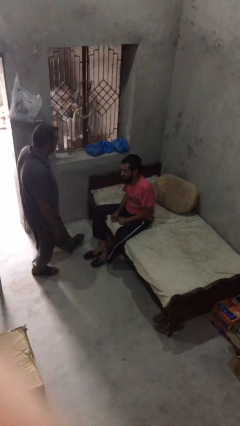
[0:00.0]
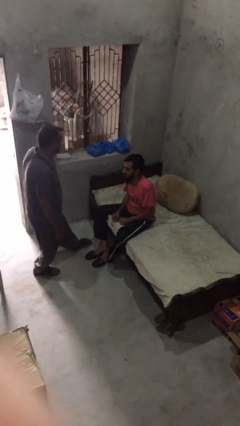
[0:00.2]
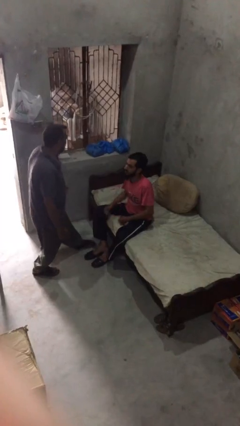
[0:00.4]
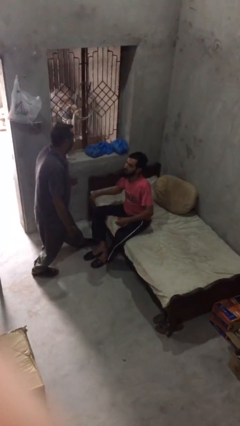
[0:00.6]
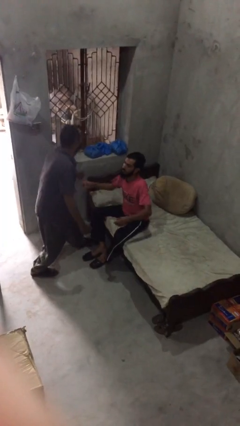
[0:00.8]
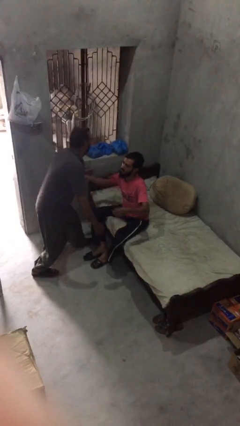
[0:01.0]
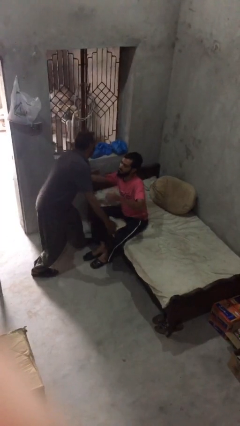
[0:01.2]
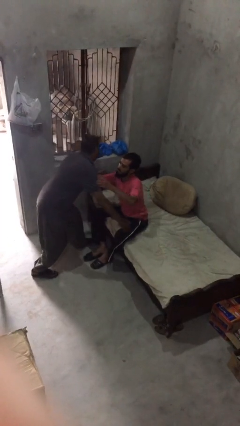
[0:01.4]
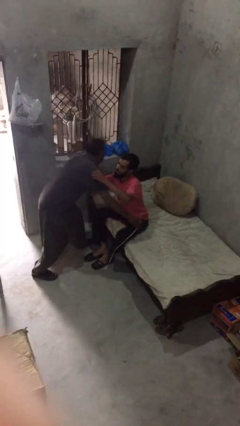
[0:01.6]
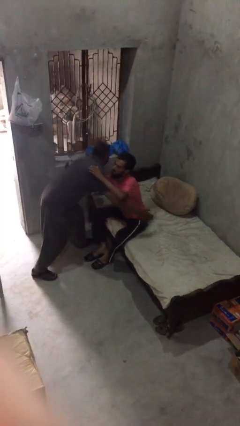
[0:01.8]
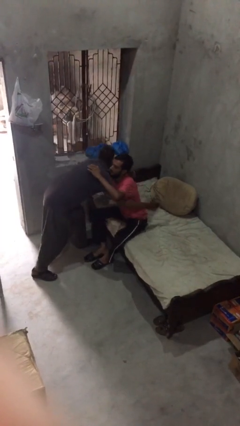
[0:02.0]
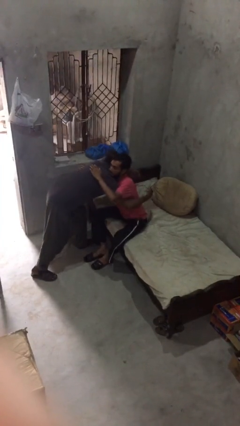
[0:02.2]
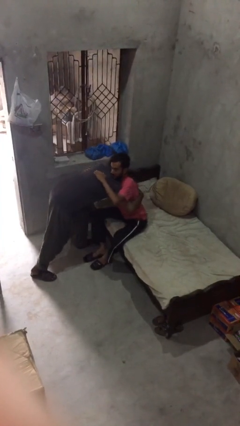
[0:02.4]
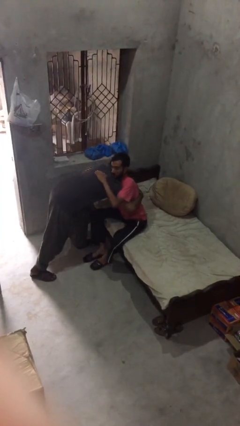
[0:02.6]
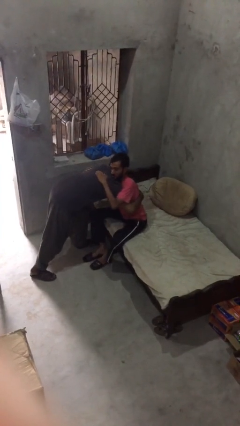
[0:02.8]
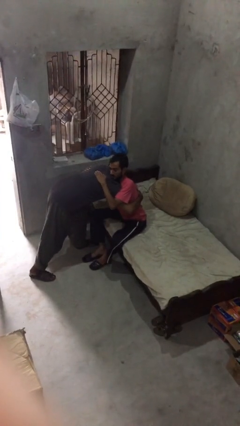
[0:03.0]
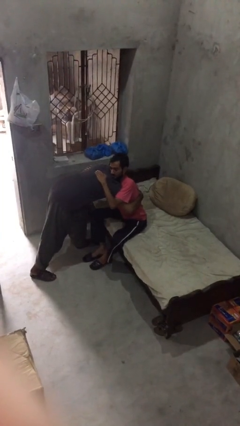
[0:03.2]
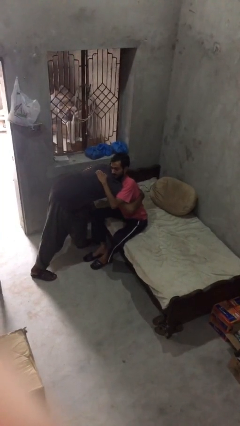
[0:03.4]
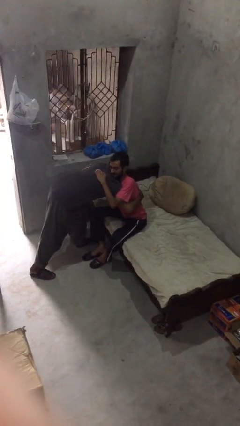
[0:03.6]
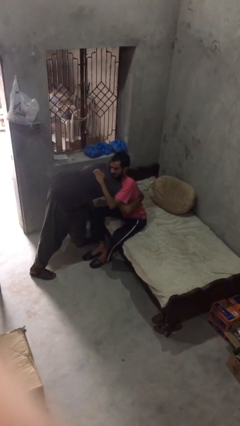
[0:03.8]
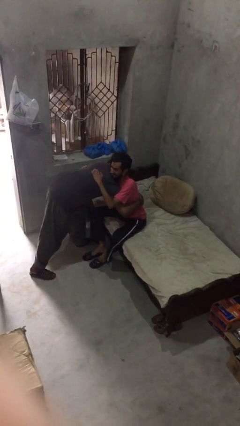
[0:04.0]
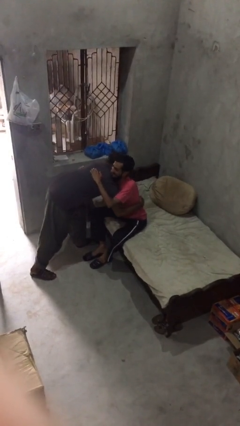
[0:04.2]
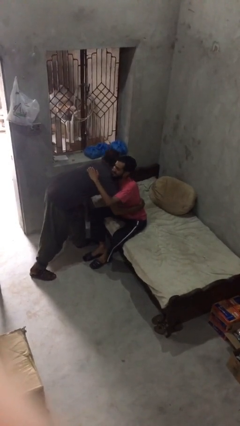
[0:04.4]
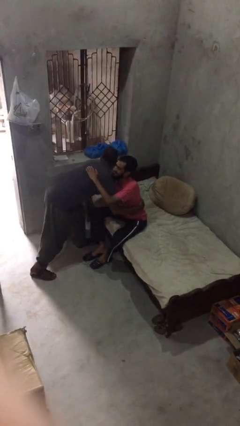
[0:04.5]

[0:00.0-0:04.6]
person embraces person

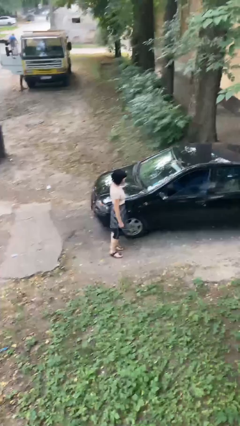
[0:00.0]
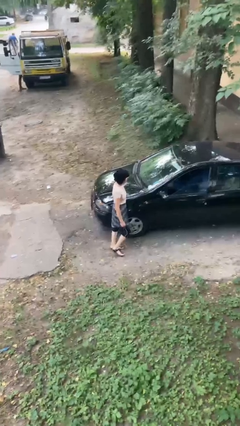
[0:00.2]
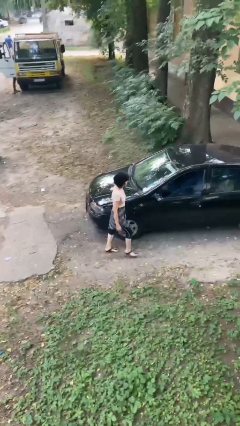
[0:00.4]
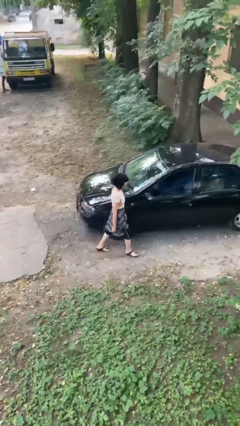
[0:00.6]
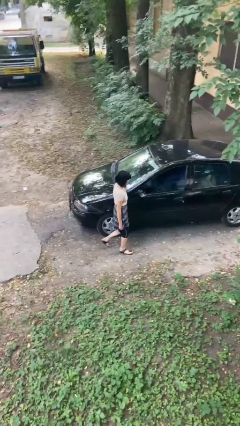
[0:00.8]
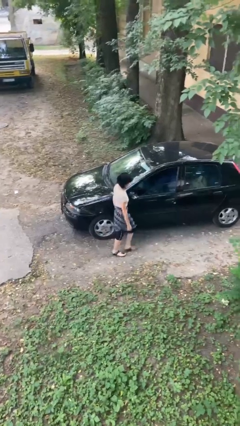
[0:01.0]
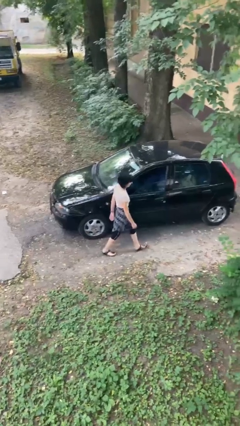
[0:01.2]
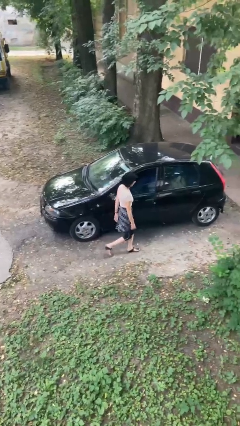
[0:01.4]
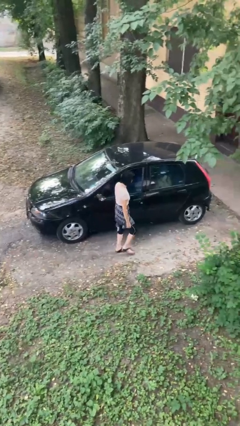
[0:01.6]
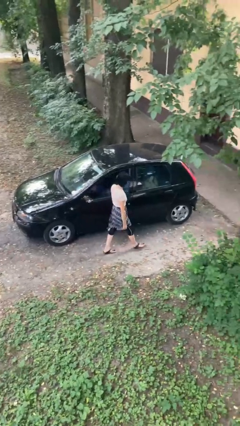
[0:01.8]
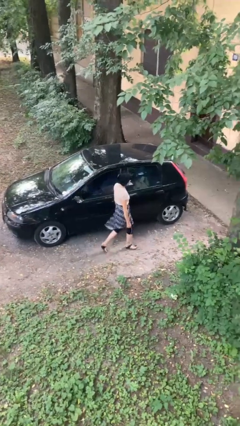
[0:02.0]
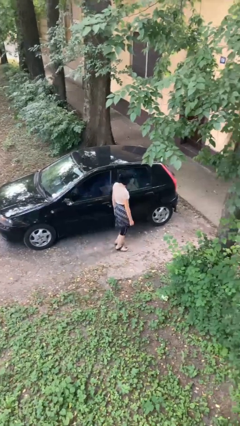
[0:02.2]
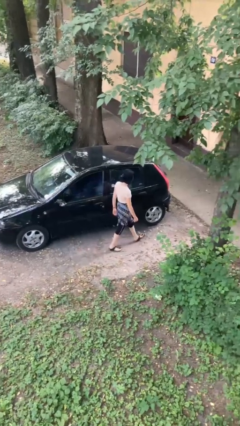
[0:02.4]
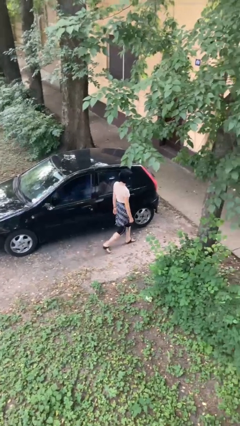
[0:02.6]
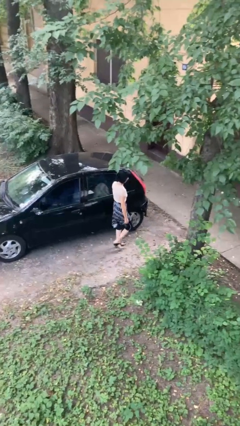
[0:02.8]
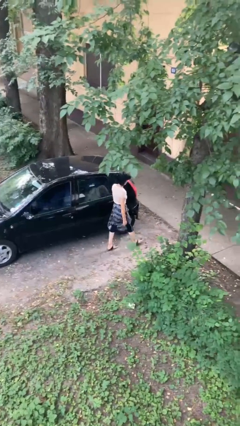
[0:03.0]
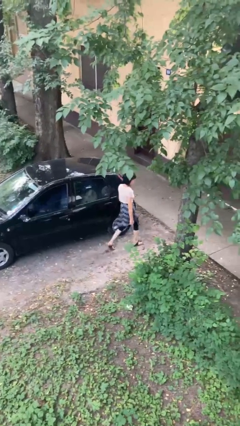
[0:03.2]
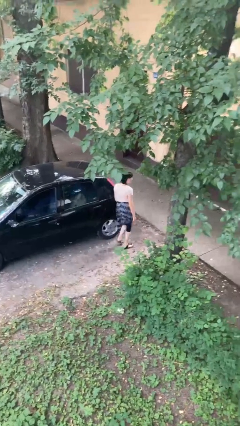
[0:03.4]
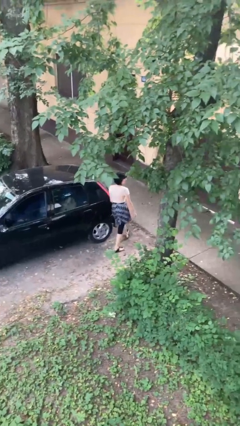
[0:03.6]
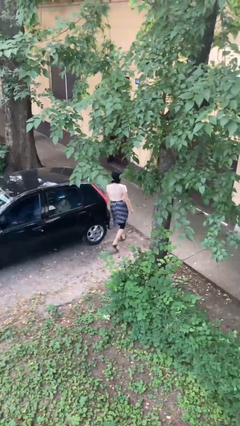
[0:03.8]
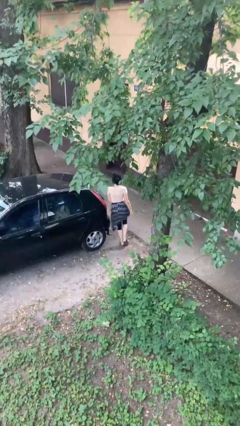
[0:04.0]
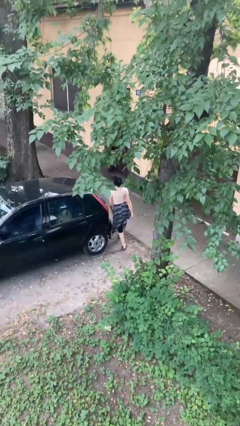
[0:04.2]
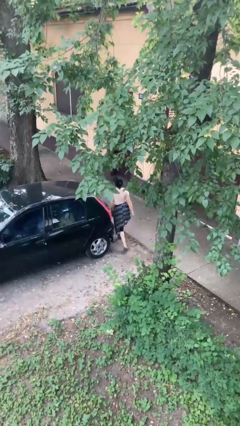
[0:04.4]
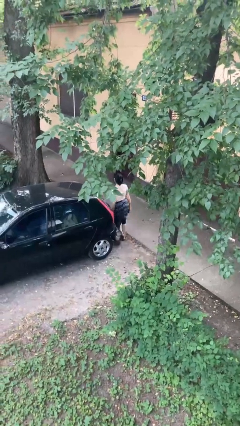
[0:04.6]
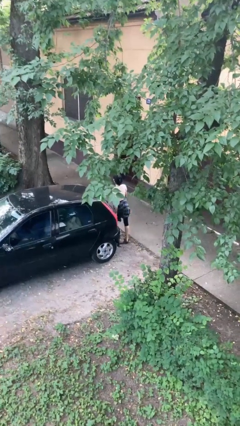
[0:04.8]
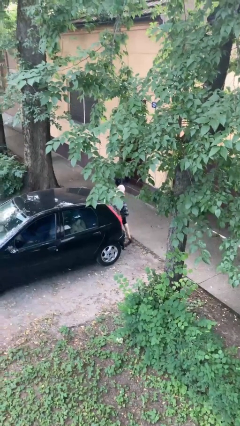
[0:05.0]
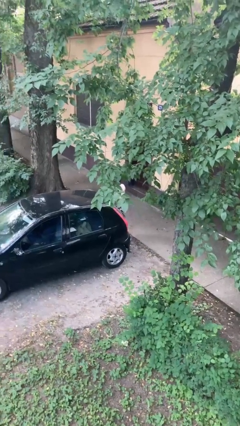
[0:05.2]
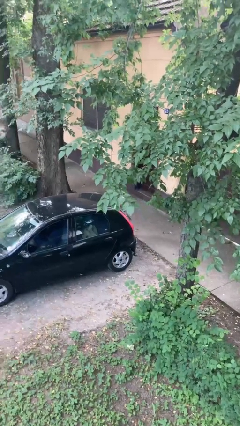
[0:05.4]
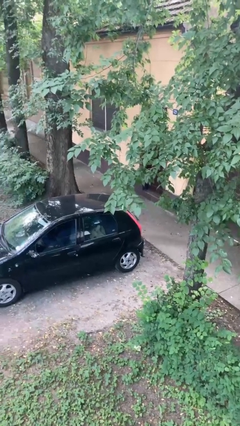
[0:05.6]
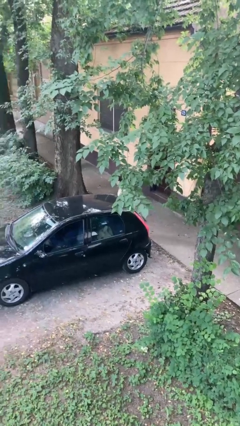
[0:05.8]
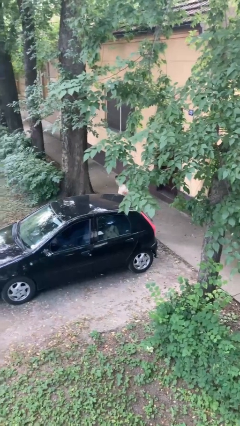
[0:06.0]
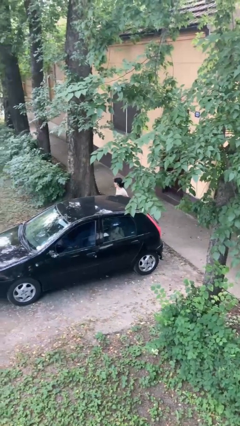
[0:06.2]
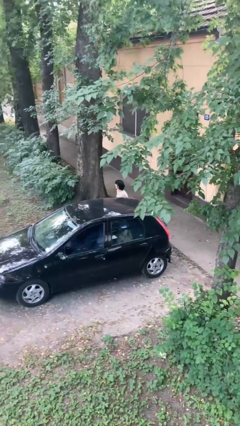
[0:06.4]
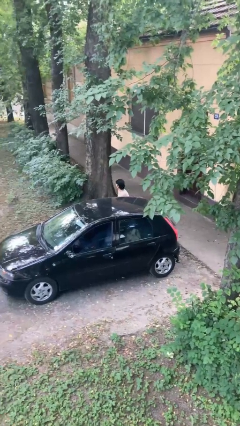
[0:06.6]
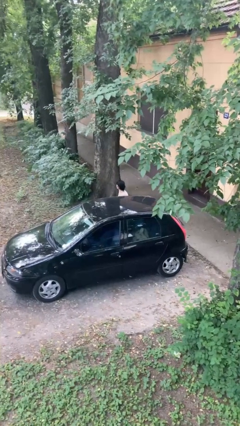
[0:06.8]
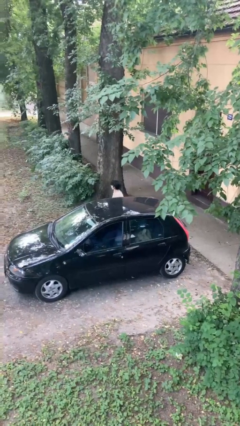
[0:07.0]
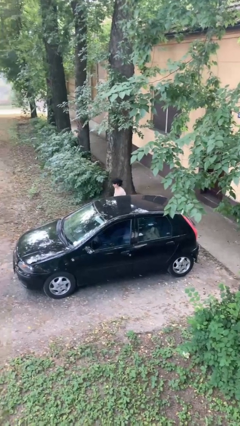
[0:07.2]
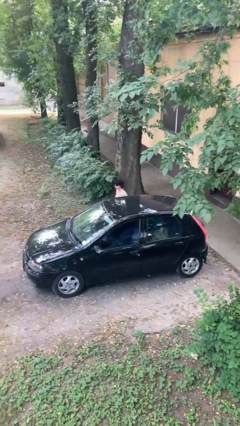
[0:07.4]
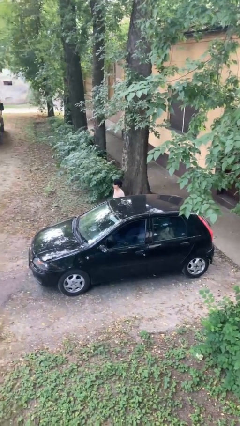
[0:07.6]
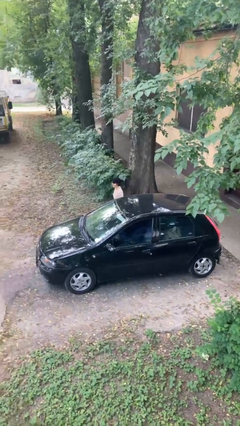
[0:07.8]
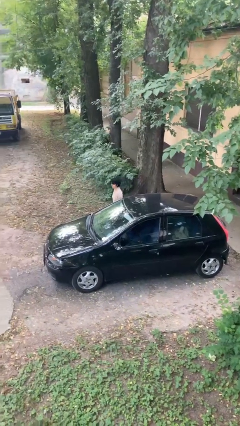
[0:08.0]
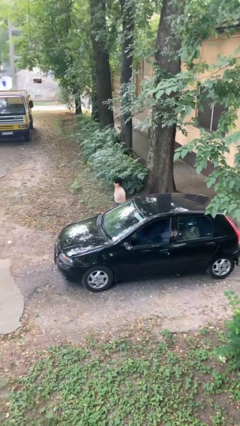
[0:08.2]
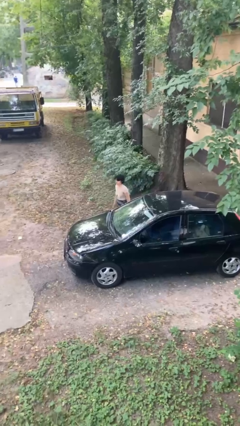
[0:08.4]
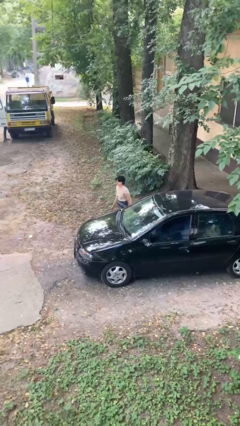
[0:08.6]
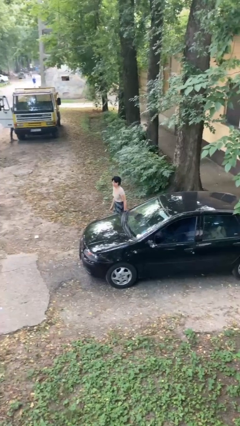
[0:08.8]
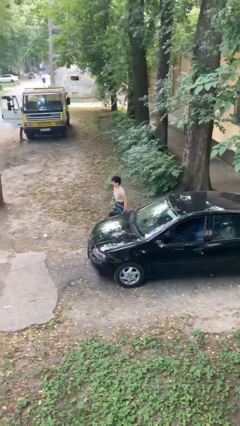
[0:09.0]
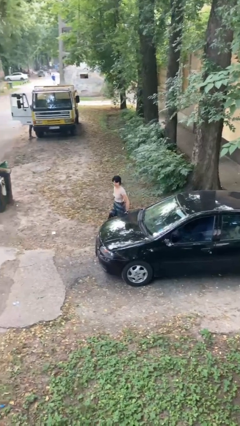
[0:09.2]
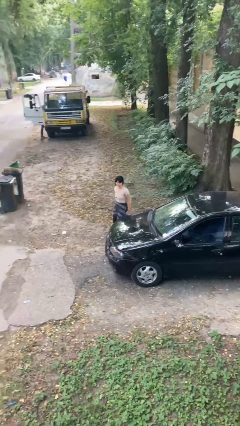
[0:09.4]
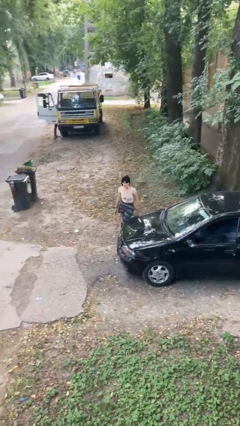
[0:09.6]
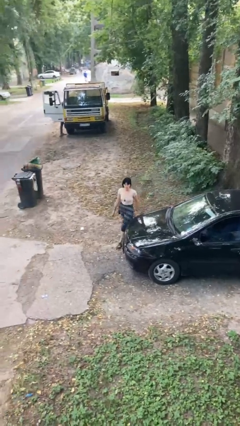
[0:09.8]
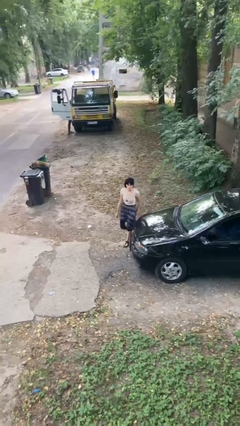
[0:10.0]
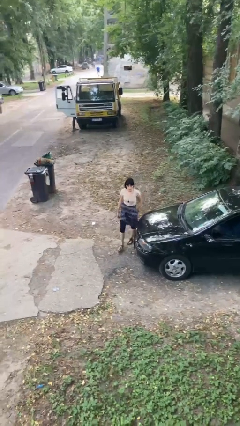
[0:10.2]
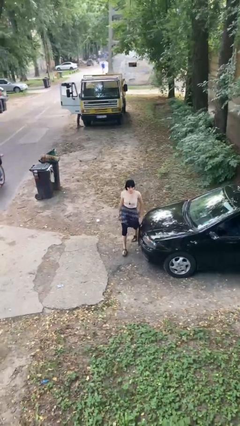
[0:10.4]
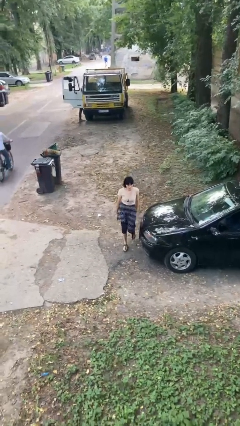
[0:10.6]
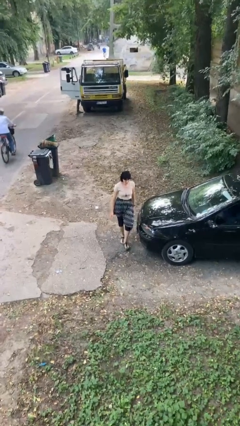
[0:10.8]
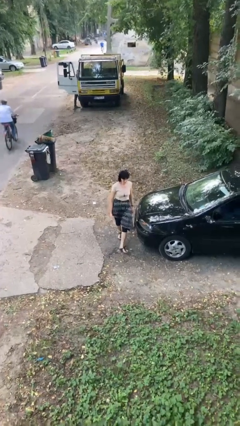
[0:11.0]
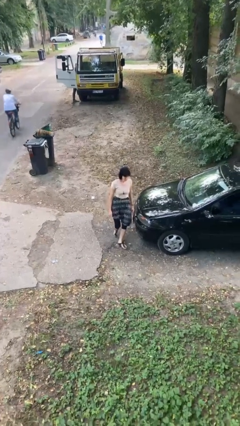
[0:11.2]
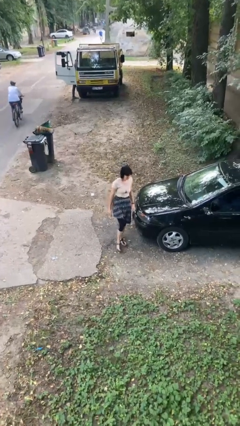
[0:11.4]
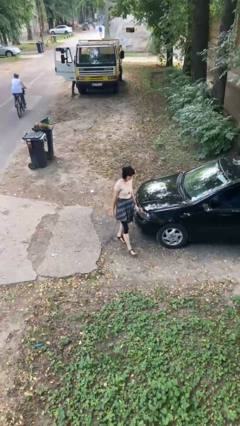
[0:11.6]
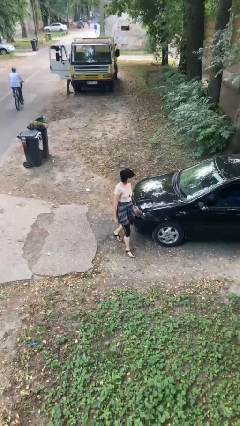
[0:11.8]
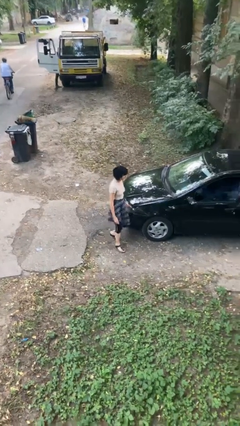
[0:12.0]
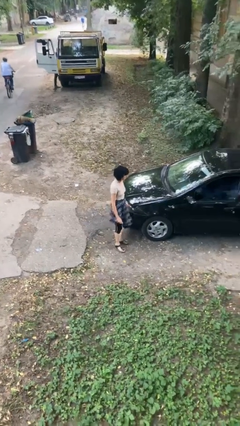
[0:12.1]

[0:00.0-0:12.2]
person walks around car

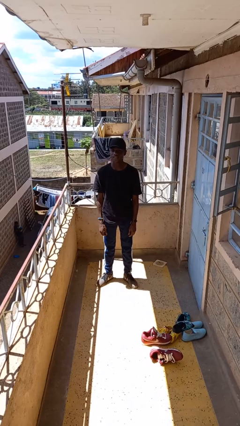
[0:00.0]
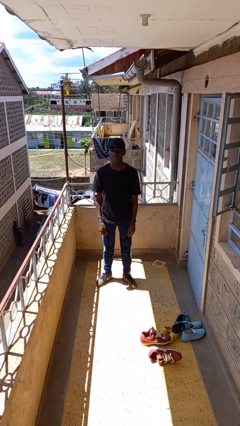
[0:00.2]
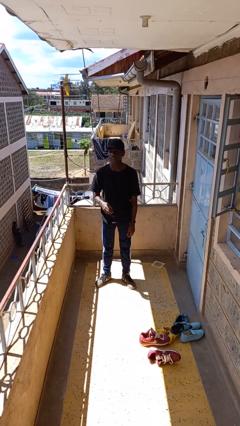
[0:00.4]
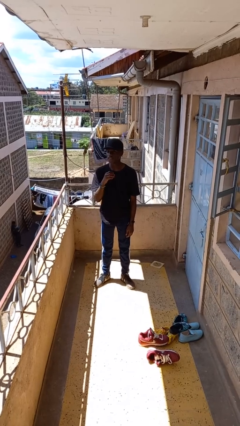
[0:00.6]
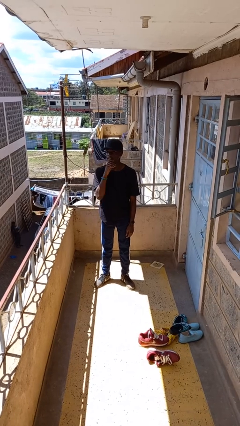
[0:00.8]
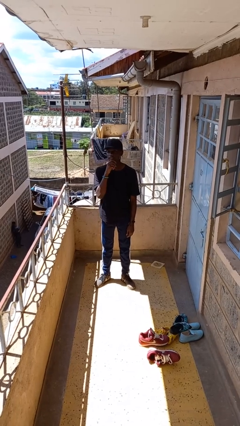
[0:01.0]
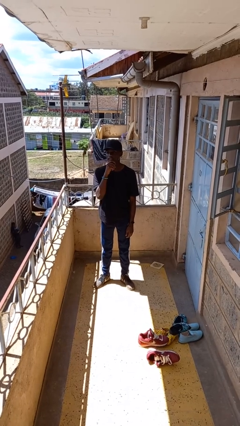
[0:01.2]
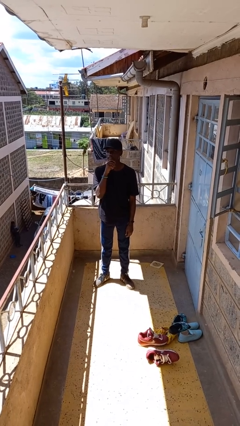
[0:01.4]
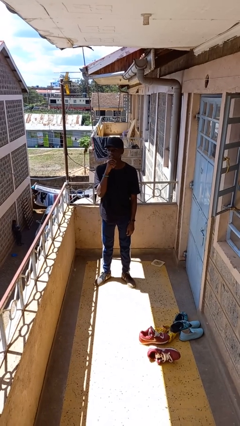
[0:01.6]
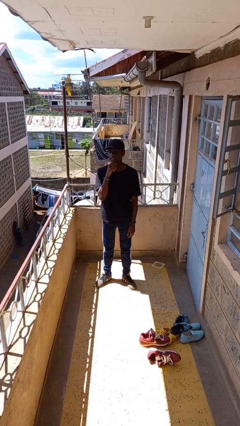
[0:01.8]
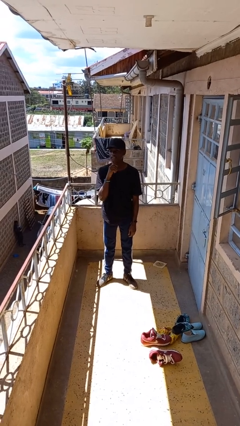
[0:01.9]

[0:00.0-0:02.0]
person strokes chin
